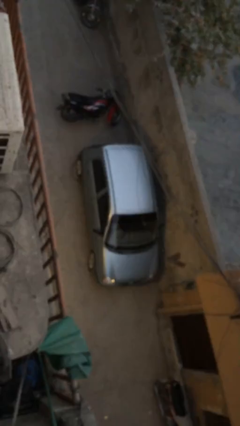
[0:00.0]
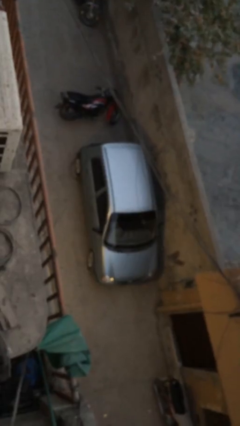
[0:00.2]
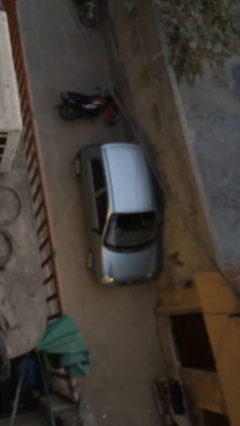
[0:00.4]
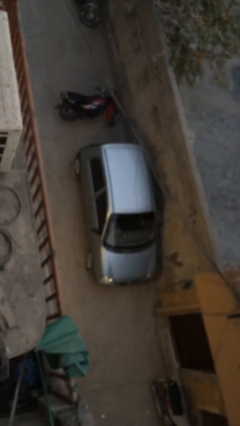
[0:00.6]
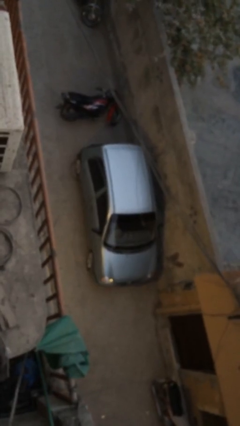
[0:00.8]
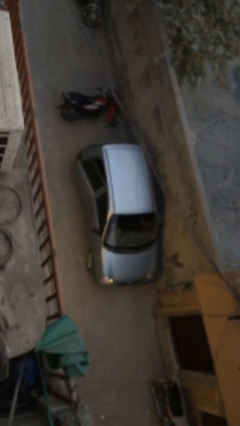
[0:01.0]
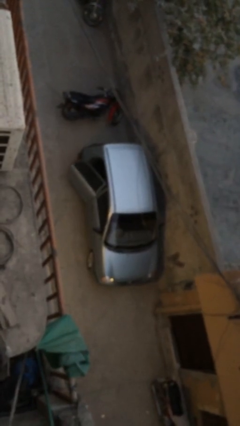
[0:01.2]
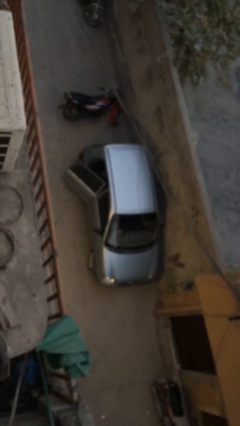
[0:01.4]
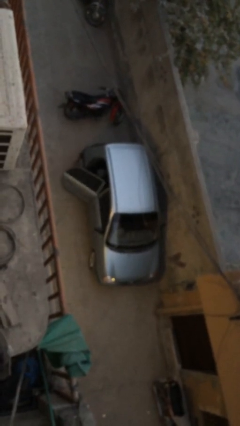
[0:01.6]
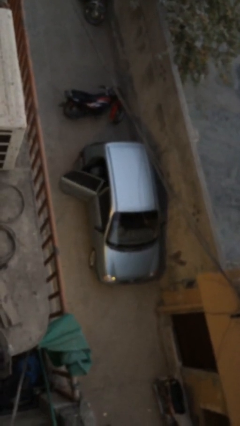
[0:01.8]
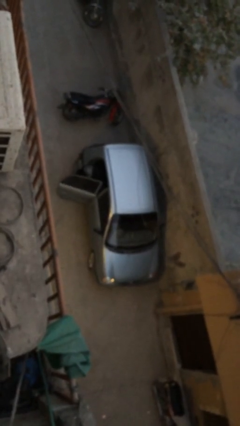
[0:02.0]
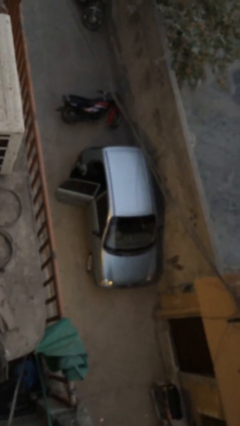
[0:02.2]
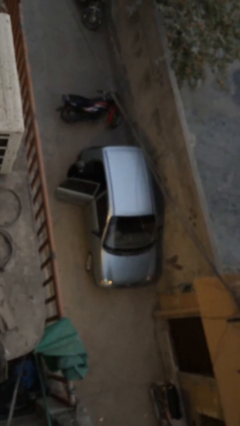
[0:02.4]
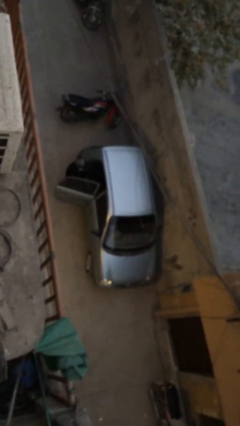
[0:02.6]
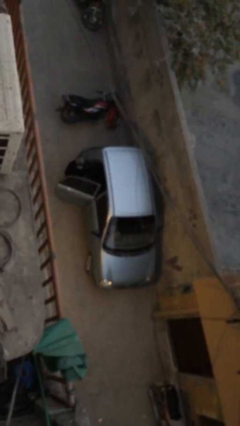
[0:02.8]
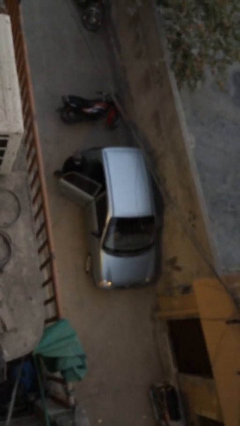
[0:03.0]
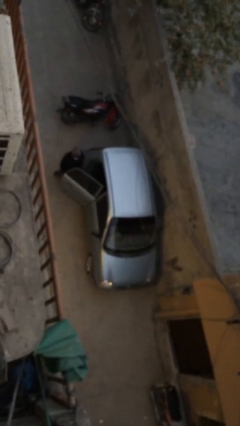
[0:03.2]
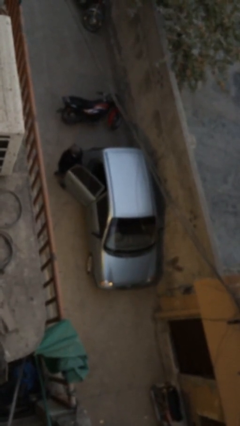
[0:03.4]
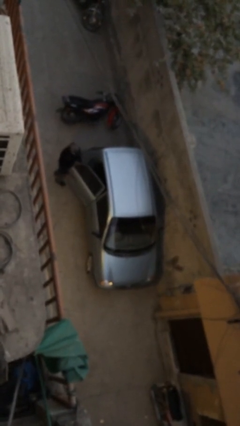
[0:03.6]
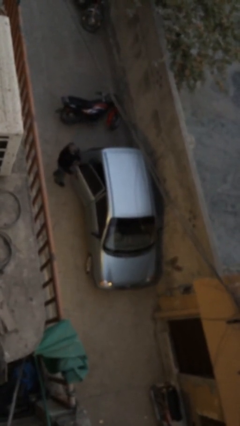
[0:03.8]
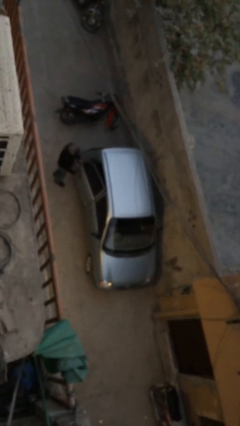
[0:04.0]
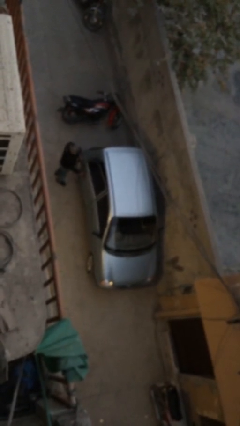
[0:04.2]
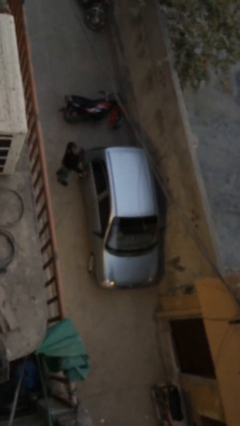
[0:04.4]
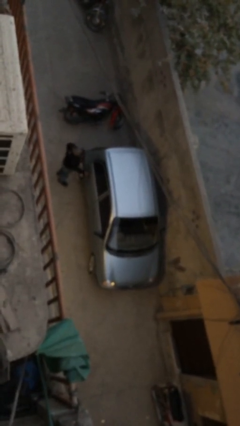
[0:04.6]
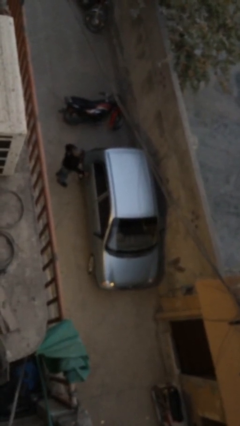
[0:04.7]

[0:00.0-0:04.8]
car drops off person

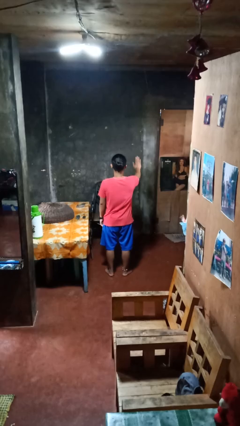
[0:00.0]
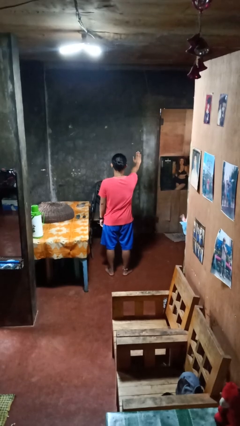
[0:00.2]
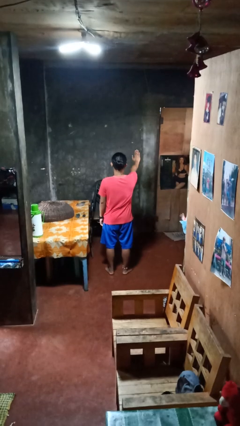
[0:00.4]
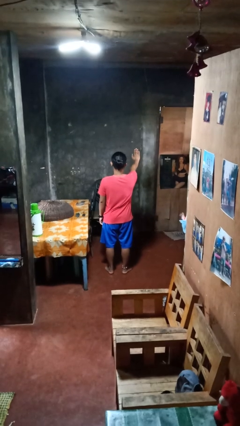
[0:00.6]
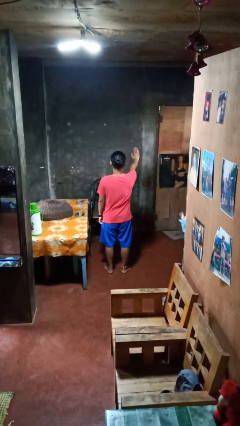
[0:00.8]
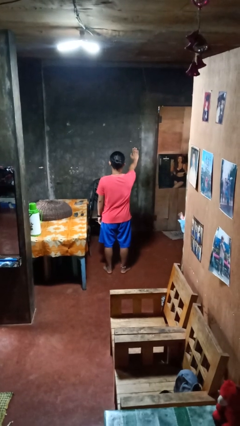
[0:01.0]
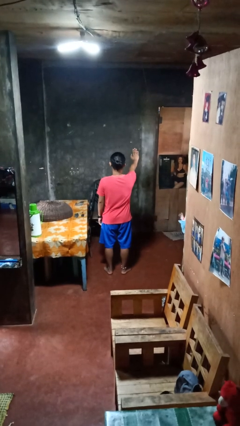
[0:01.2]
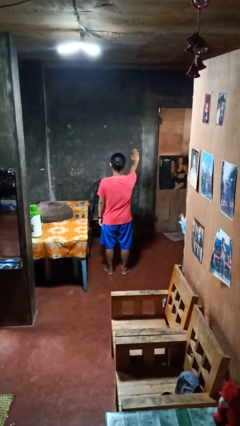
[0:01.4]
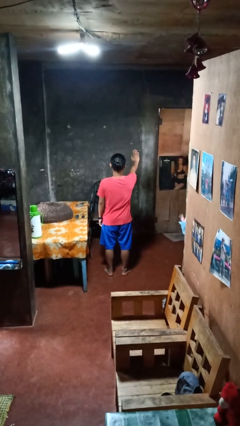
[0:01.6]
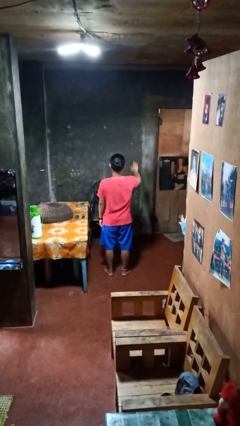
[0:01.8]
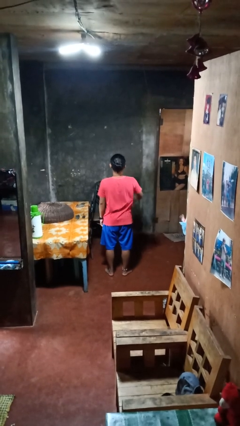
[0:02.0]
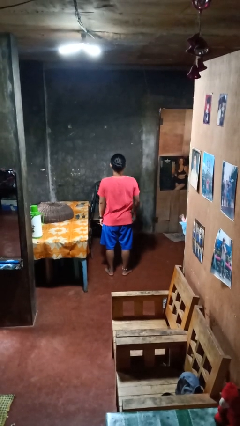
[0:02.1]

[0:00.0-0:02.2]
person gestures stop

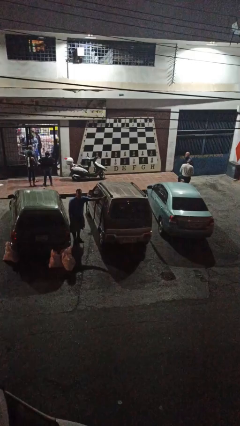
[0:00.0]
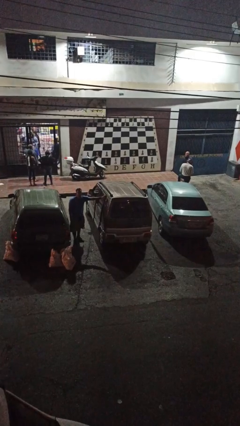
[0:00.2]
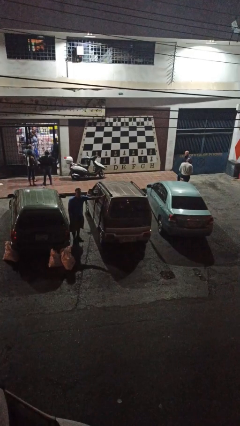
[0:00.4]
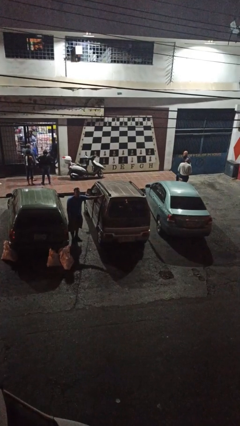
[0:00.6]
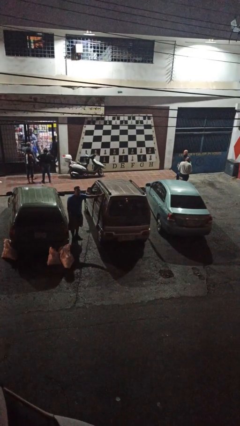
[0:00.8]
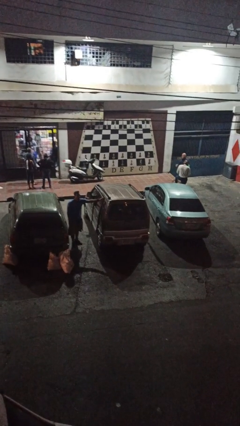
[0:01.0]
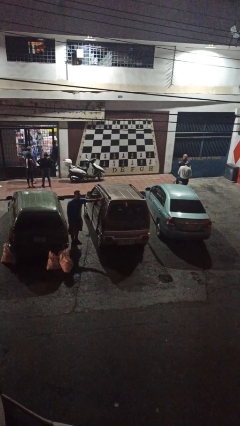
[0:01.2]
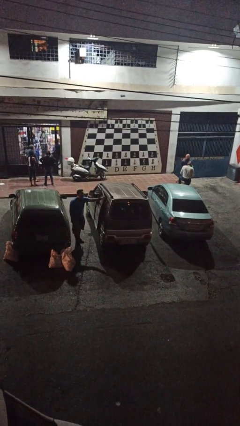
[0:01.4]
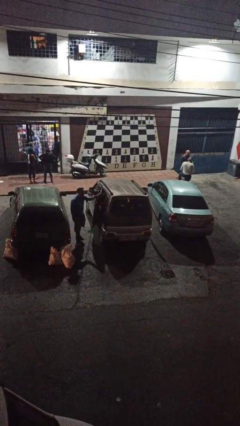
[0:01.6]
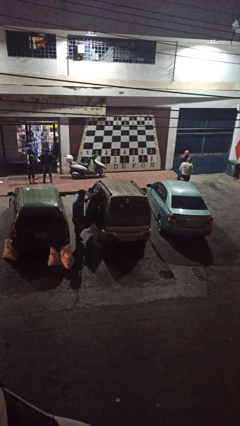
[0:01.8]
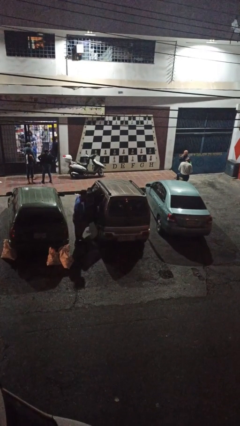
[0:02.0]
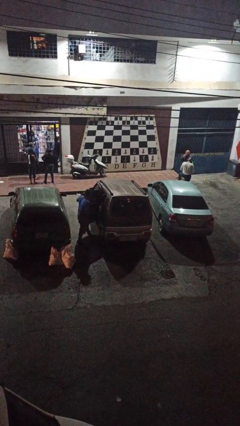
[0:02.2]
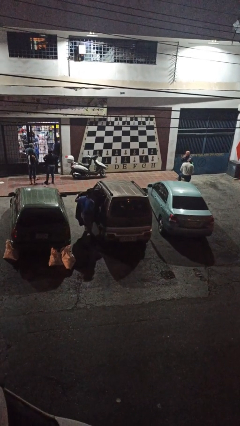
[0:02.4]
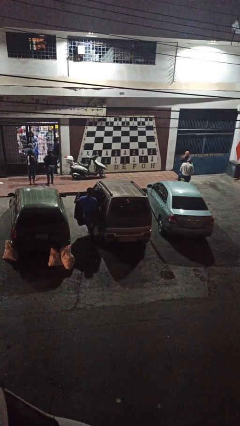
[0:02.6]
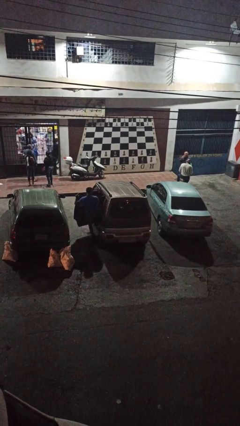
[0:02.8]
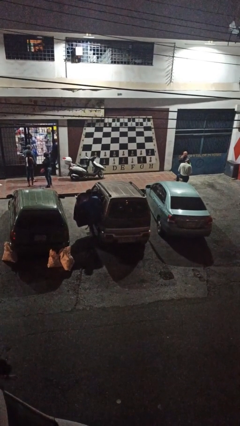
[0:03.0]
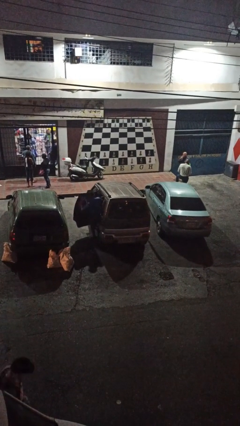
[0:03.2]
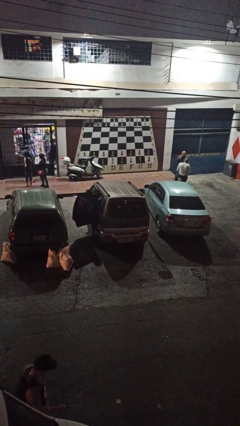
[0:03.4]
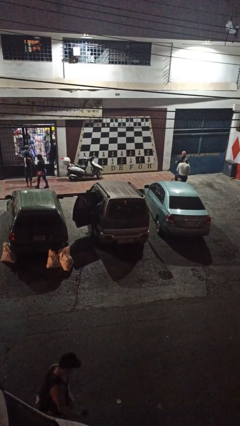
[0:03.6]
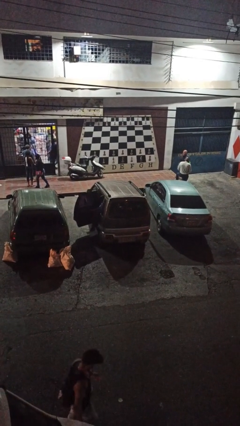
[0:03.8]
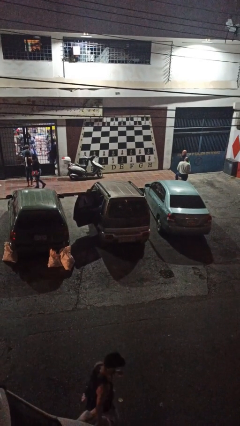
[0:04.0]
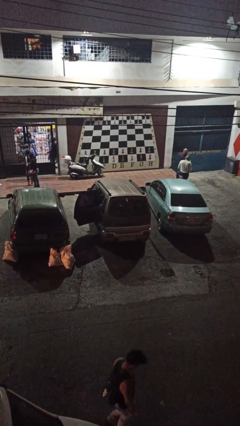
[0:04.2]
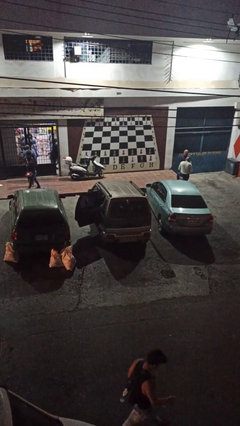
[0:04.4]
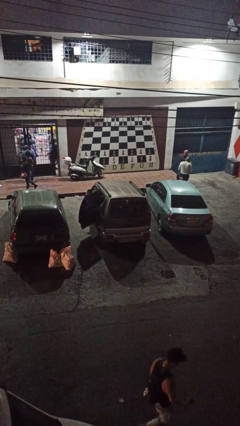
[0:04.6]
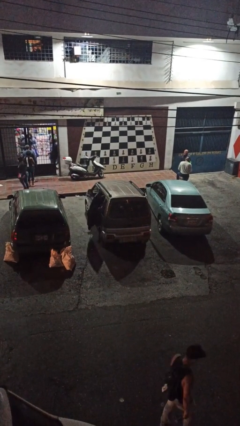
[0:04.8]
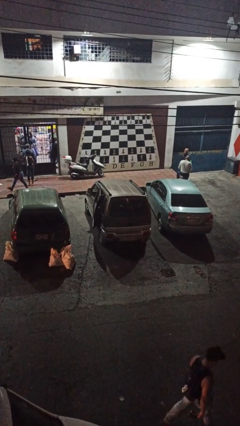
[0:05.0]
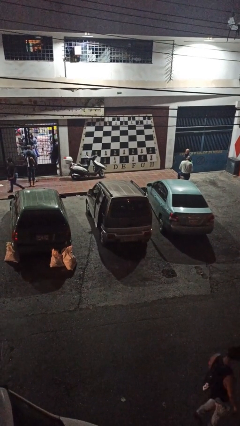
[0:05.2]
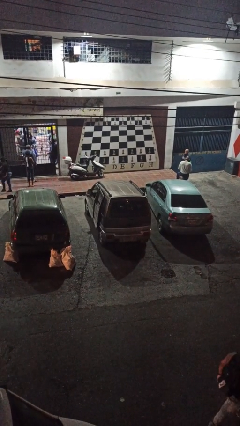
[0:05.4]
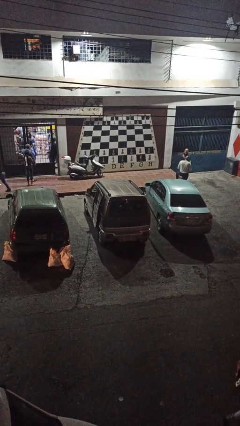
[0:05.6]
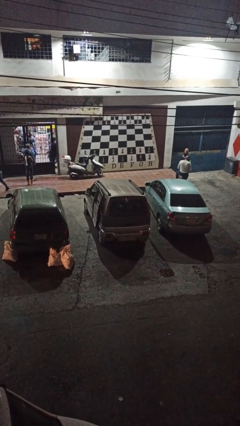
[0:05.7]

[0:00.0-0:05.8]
car picks up person

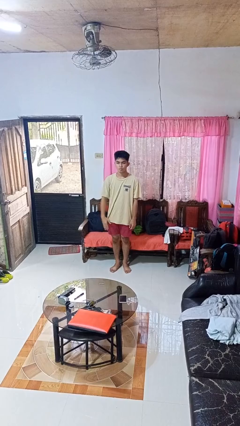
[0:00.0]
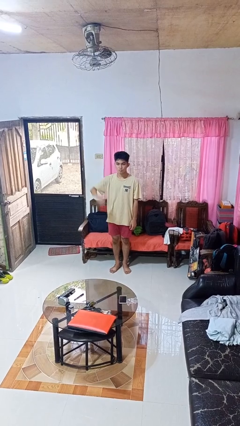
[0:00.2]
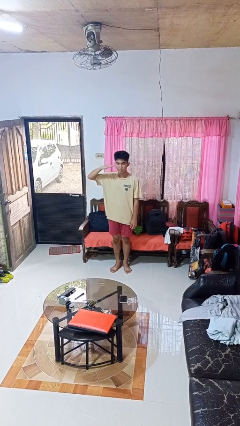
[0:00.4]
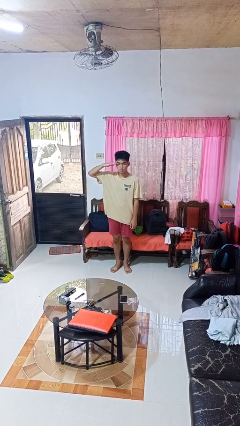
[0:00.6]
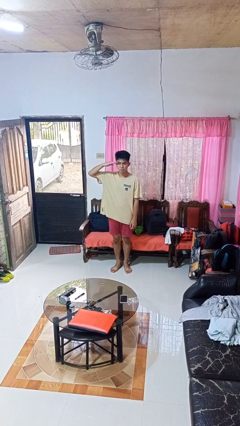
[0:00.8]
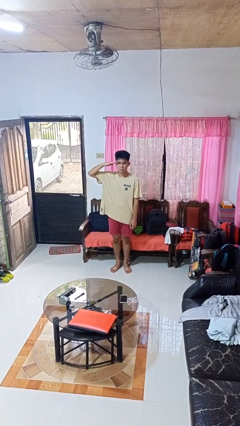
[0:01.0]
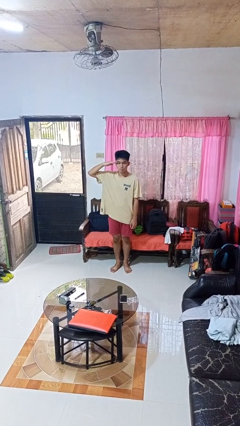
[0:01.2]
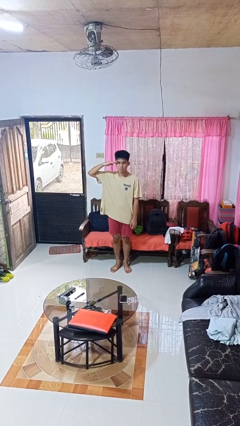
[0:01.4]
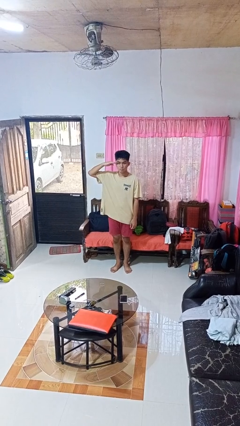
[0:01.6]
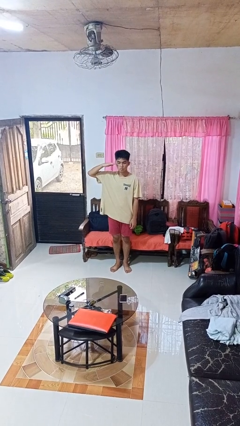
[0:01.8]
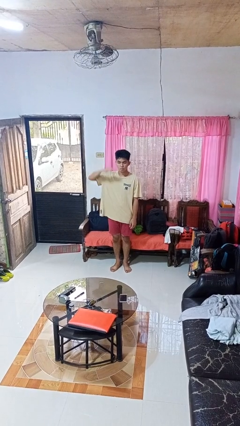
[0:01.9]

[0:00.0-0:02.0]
person salutes

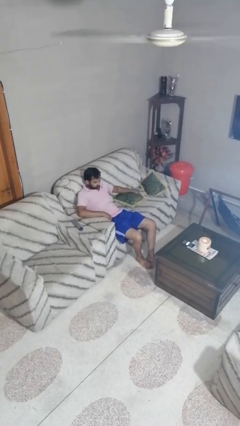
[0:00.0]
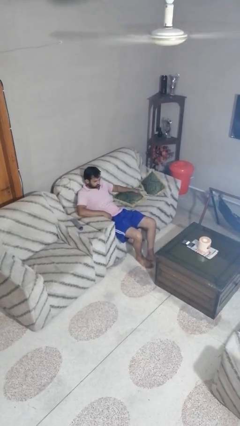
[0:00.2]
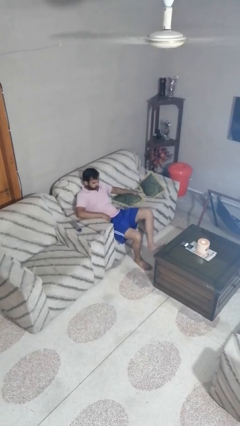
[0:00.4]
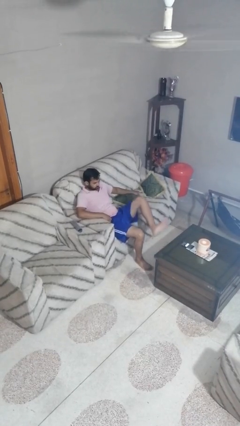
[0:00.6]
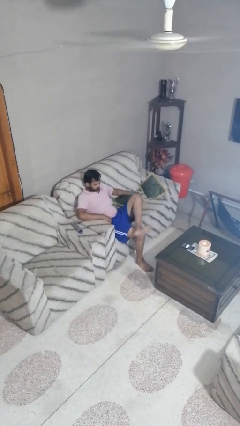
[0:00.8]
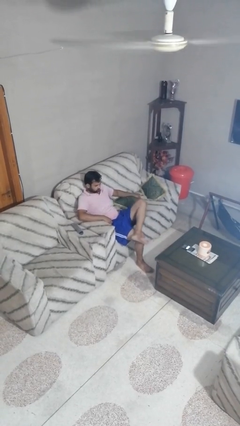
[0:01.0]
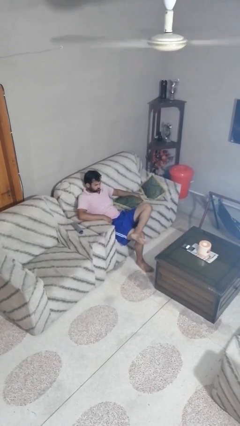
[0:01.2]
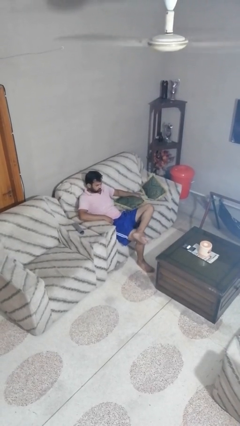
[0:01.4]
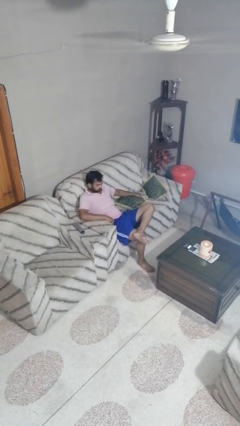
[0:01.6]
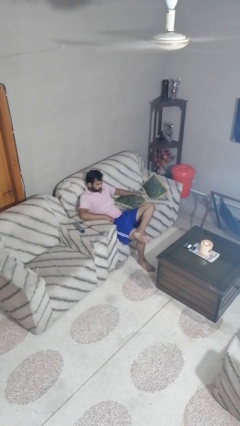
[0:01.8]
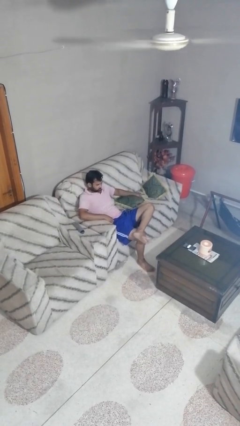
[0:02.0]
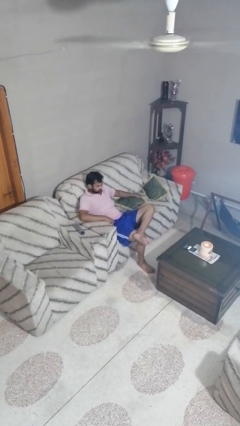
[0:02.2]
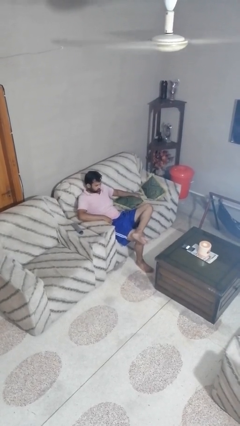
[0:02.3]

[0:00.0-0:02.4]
person crosses legs

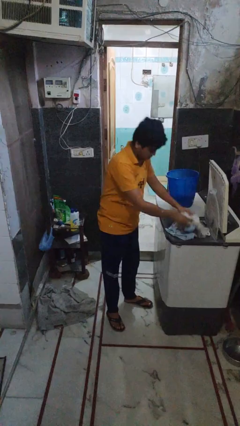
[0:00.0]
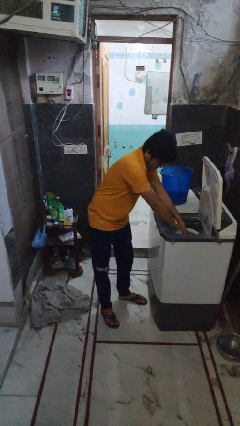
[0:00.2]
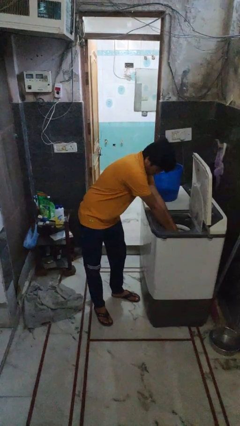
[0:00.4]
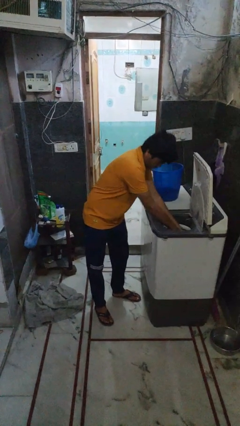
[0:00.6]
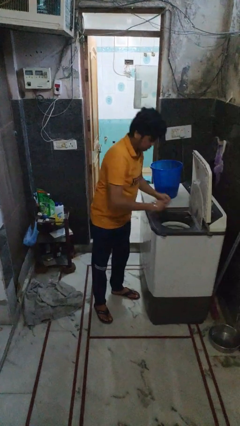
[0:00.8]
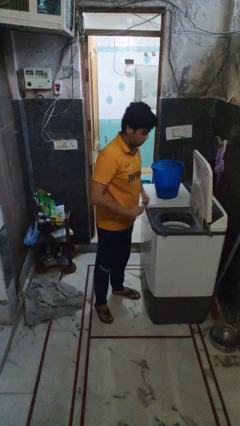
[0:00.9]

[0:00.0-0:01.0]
person loads clotheswasher
